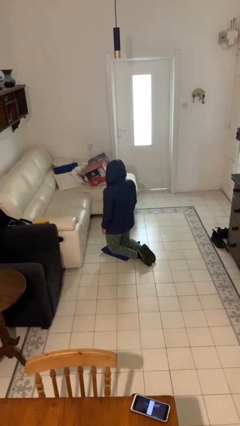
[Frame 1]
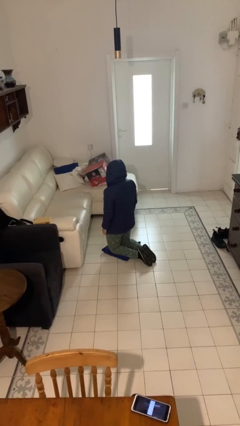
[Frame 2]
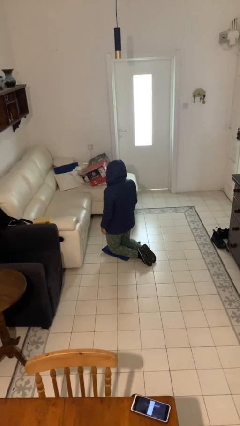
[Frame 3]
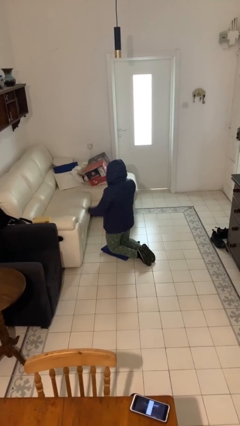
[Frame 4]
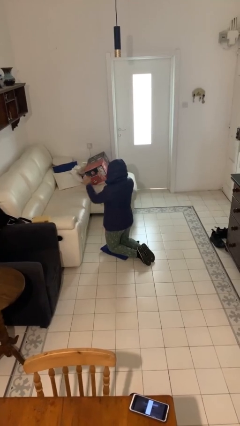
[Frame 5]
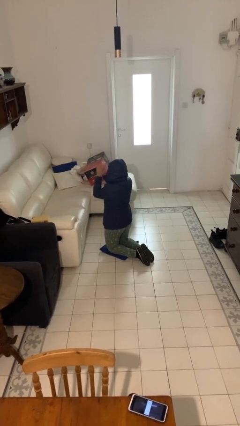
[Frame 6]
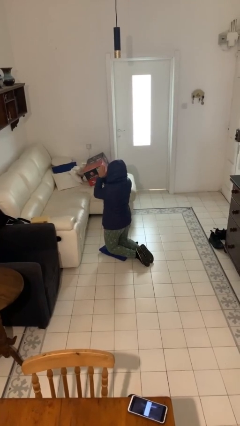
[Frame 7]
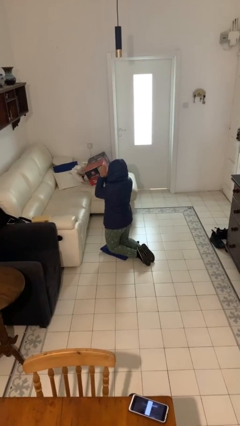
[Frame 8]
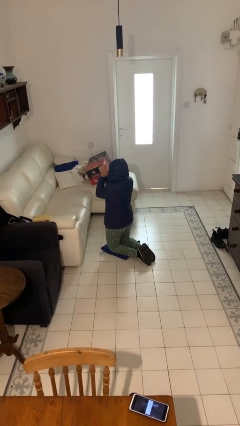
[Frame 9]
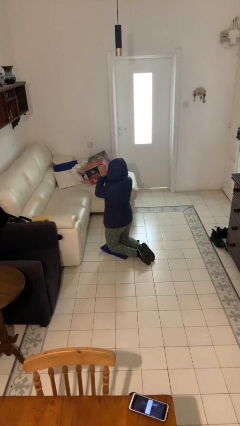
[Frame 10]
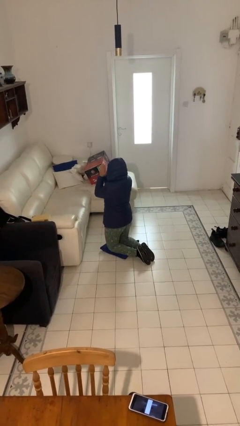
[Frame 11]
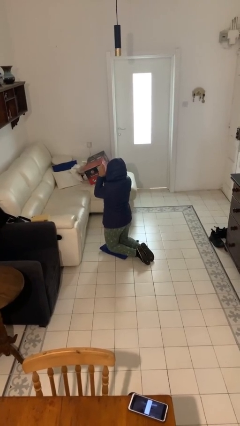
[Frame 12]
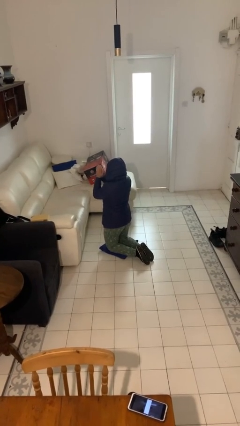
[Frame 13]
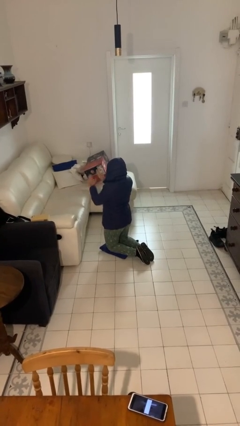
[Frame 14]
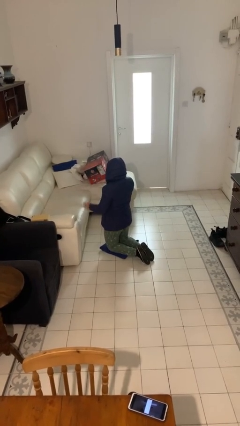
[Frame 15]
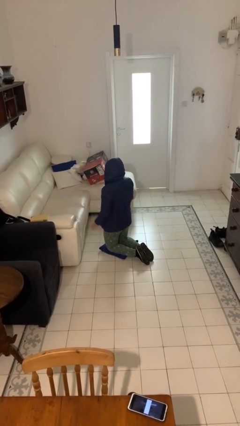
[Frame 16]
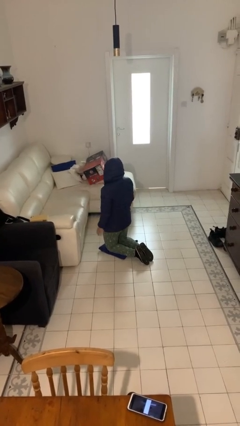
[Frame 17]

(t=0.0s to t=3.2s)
person prays

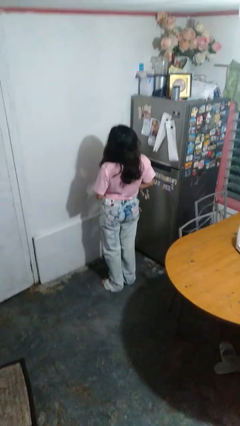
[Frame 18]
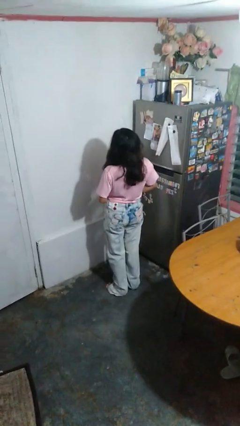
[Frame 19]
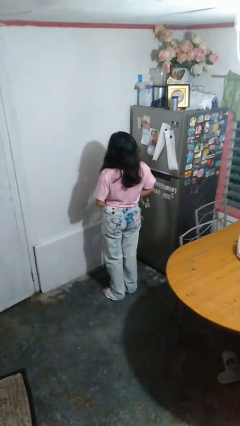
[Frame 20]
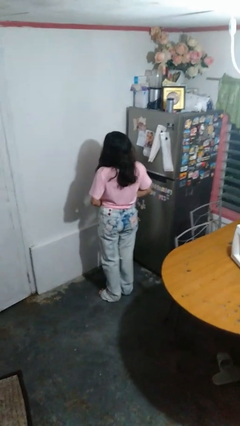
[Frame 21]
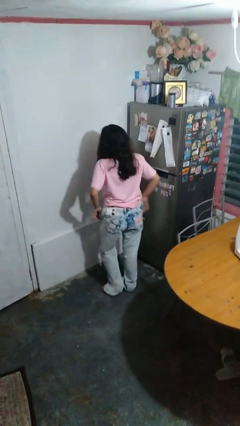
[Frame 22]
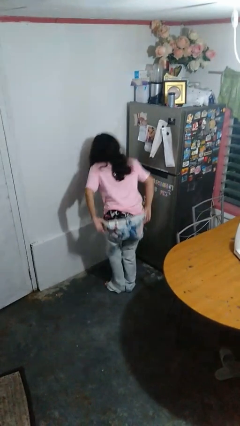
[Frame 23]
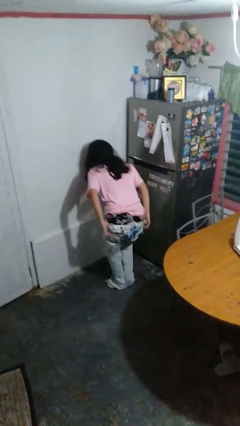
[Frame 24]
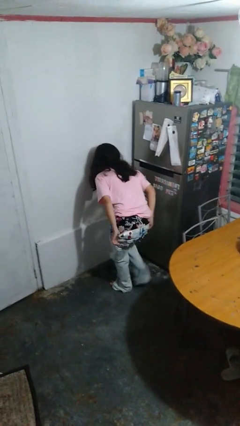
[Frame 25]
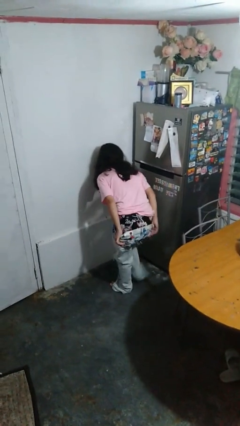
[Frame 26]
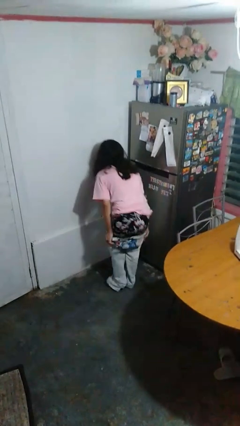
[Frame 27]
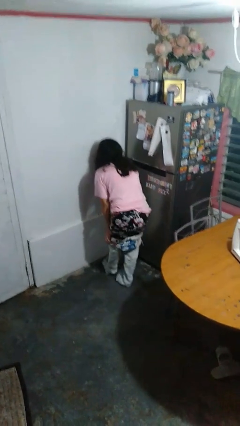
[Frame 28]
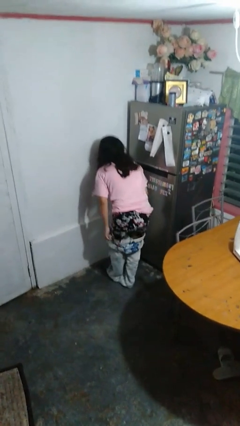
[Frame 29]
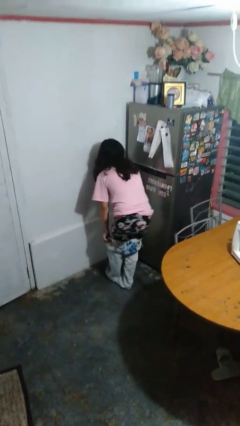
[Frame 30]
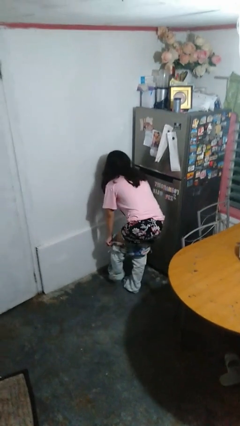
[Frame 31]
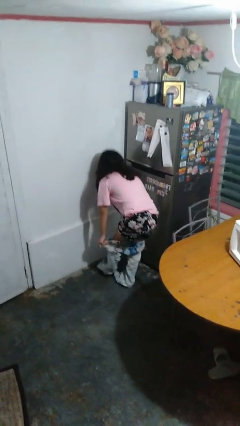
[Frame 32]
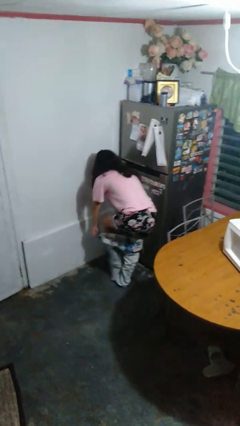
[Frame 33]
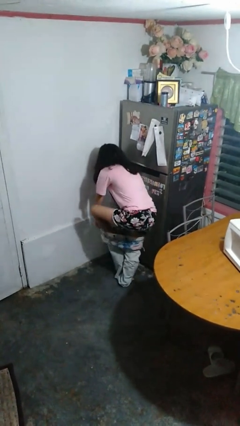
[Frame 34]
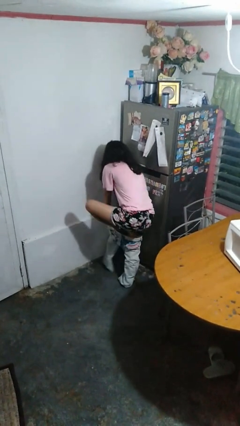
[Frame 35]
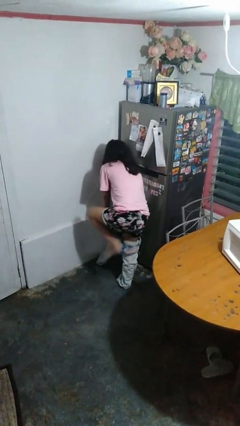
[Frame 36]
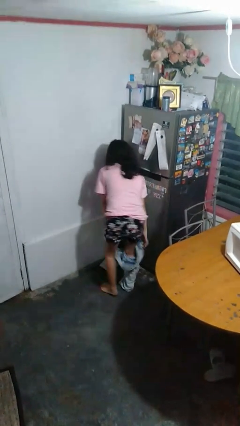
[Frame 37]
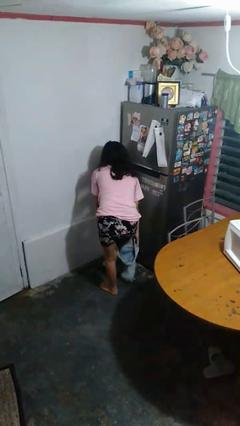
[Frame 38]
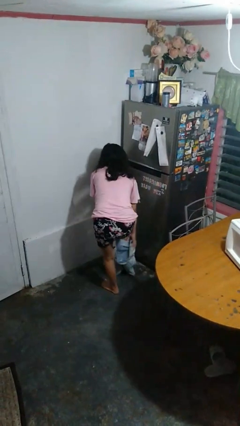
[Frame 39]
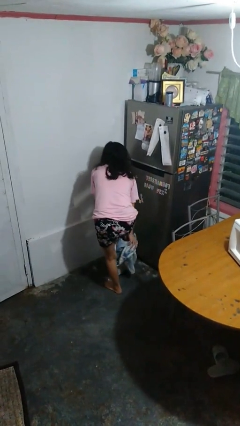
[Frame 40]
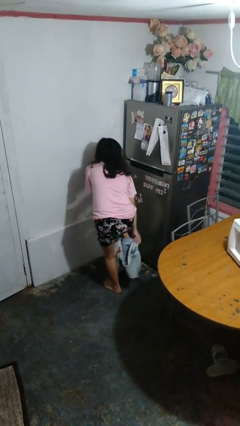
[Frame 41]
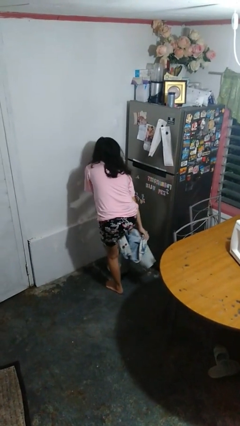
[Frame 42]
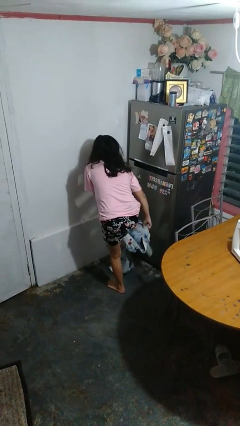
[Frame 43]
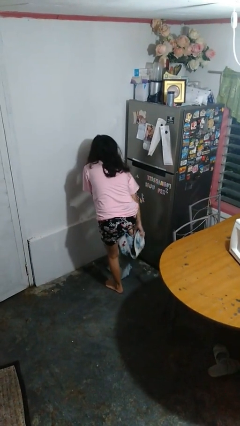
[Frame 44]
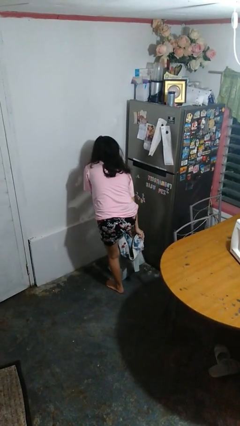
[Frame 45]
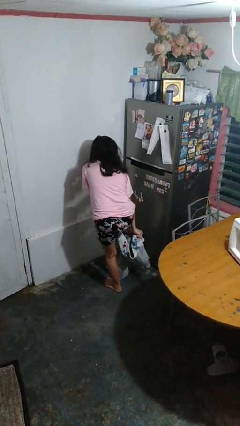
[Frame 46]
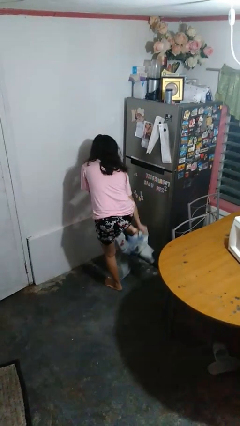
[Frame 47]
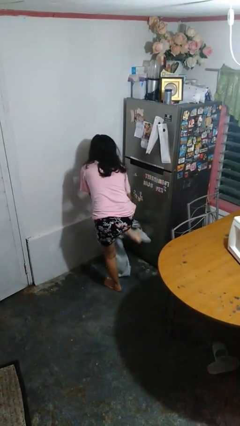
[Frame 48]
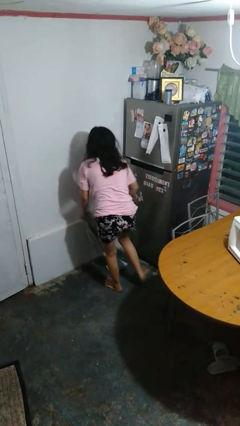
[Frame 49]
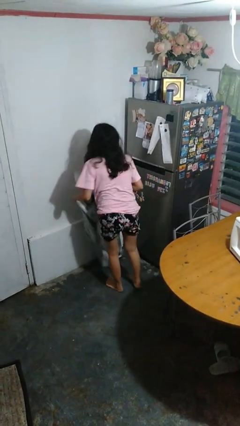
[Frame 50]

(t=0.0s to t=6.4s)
person takes off pants

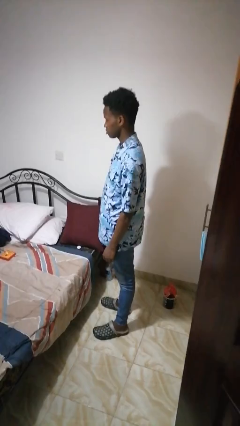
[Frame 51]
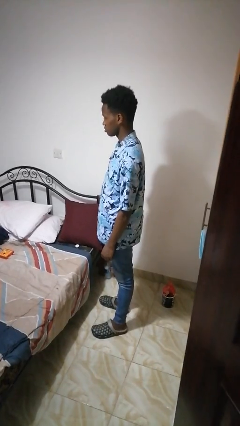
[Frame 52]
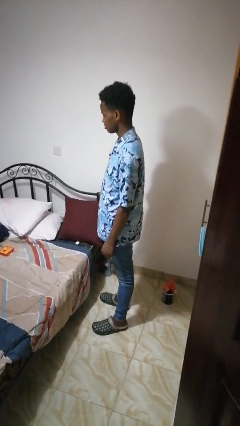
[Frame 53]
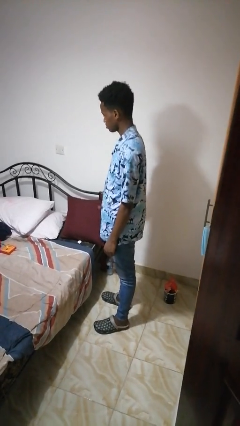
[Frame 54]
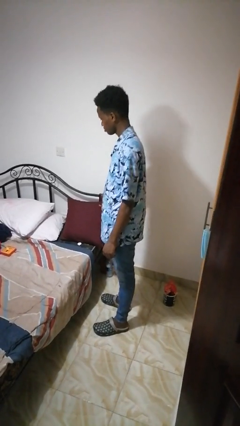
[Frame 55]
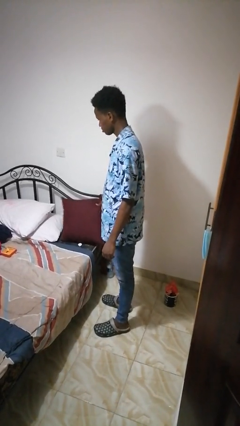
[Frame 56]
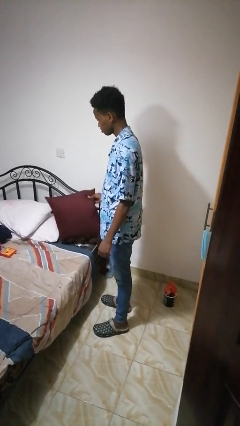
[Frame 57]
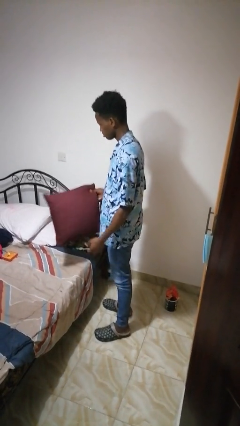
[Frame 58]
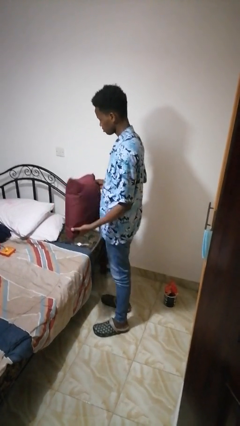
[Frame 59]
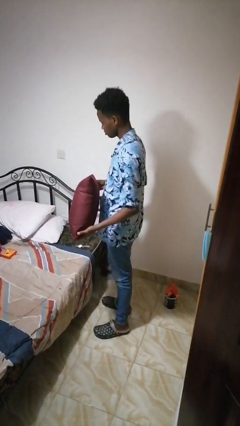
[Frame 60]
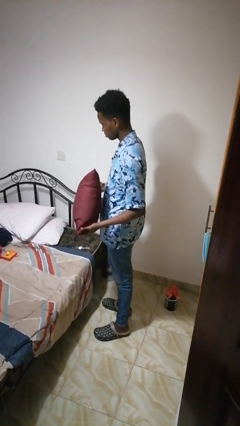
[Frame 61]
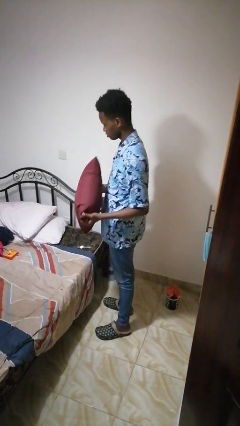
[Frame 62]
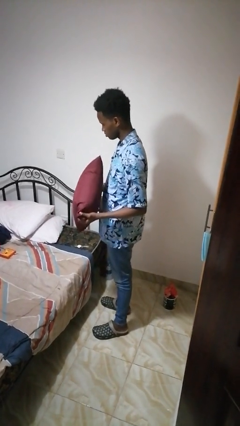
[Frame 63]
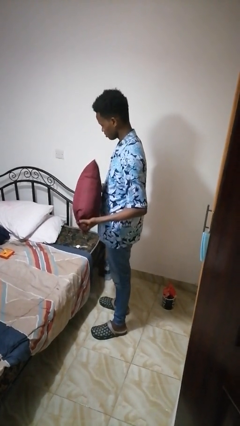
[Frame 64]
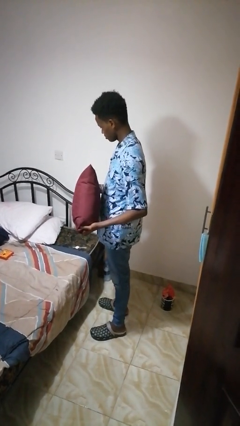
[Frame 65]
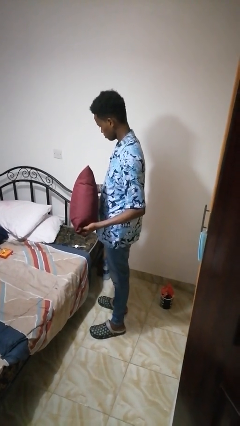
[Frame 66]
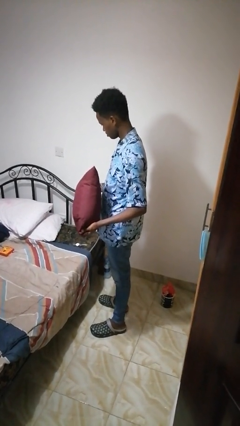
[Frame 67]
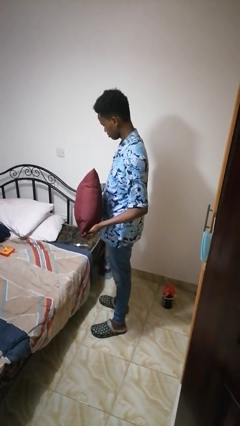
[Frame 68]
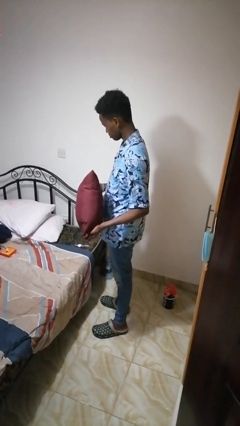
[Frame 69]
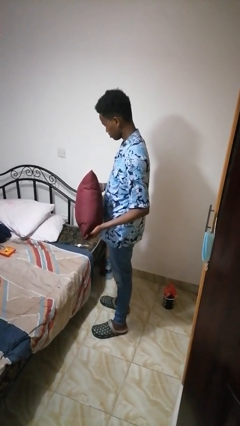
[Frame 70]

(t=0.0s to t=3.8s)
person picks up object from bed

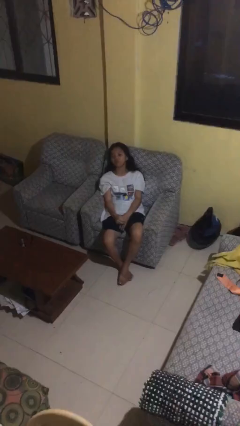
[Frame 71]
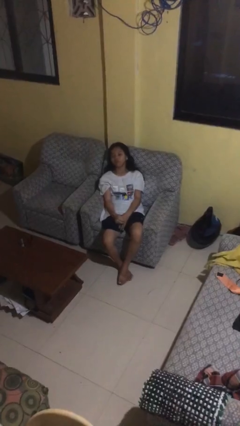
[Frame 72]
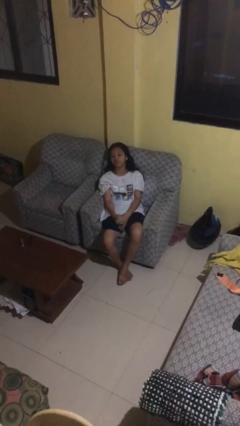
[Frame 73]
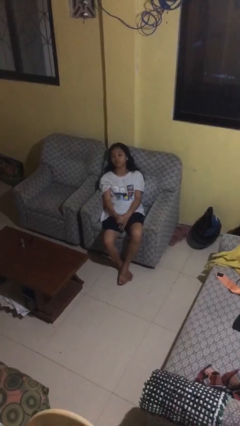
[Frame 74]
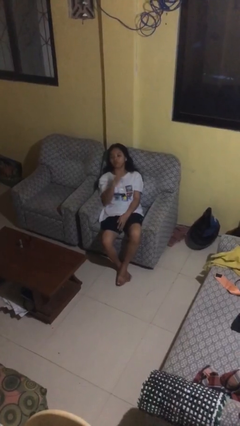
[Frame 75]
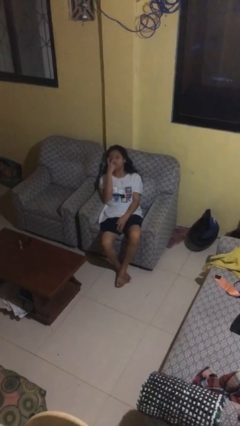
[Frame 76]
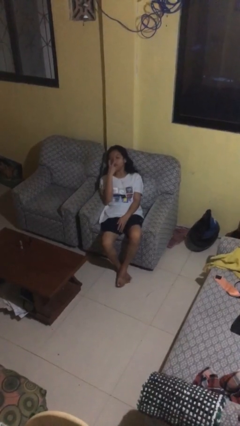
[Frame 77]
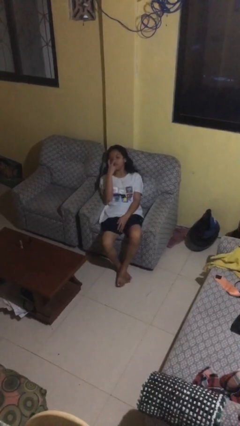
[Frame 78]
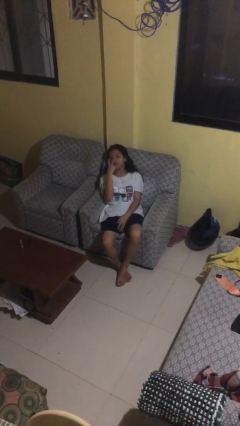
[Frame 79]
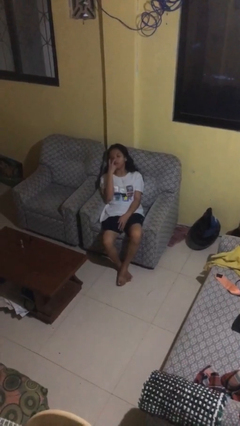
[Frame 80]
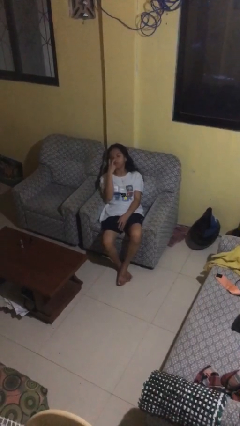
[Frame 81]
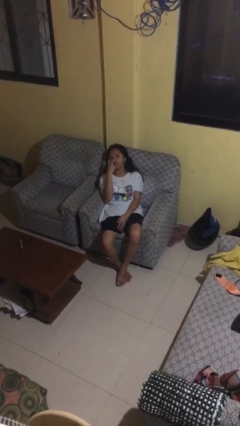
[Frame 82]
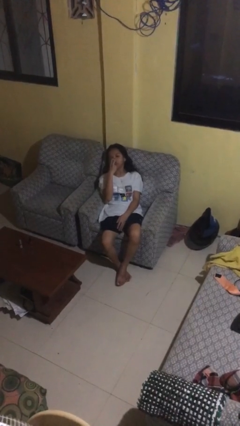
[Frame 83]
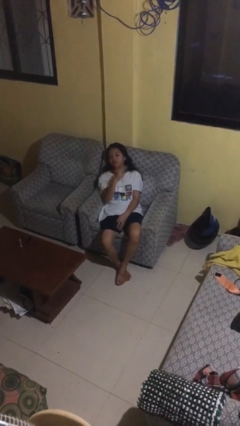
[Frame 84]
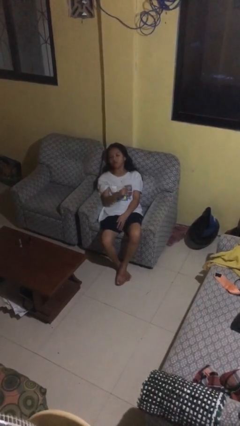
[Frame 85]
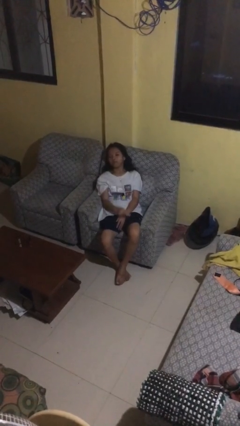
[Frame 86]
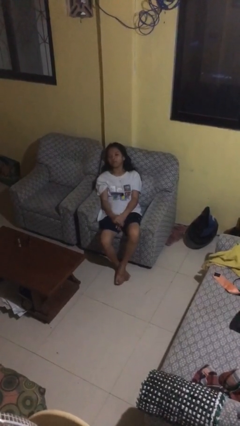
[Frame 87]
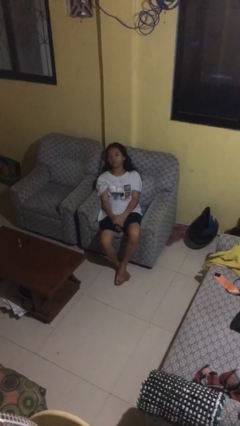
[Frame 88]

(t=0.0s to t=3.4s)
person gestures watch closely

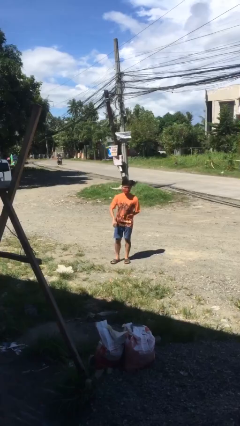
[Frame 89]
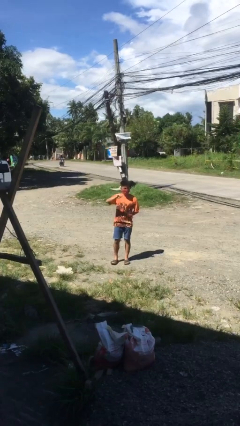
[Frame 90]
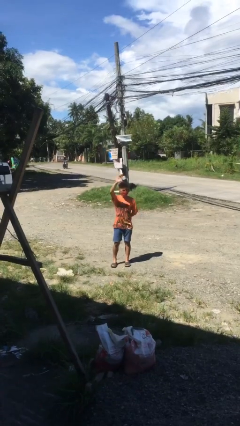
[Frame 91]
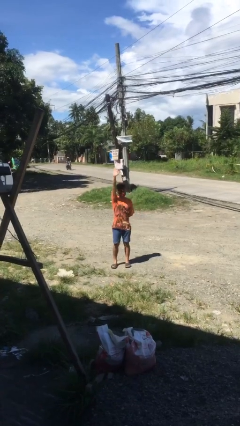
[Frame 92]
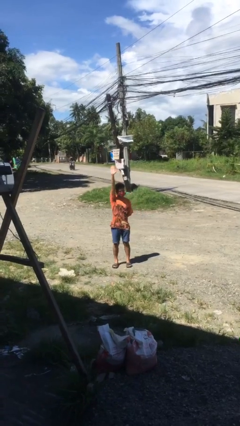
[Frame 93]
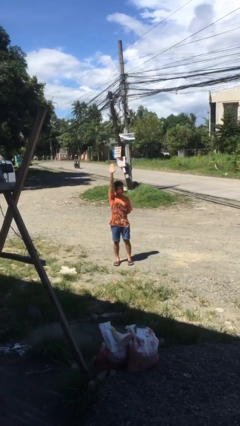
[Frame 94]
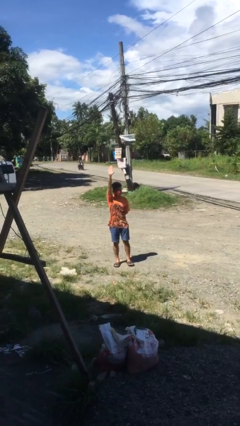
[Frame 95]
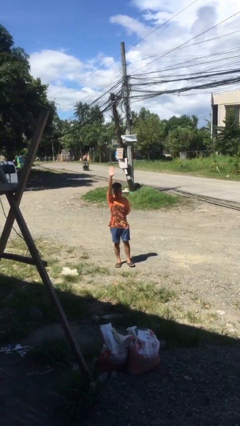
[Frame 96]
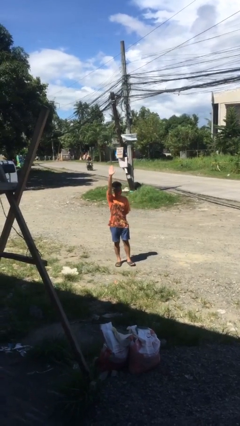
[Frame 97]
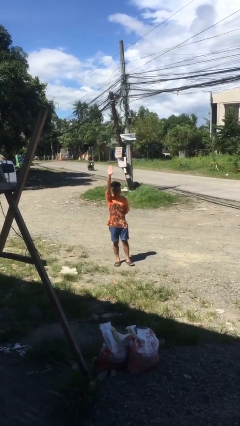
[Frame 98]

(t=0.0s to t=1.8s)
person gestures raise hand
